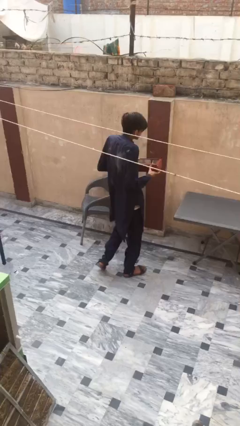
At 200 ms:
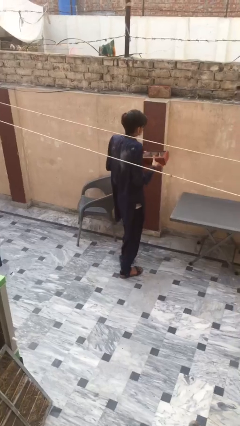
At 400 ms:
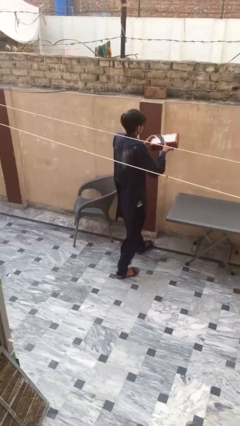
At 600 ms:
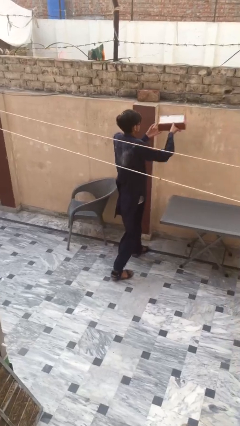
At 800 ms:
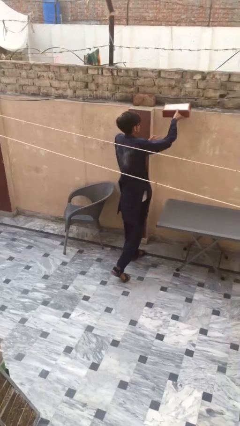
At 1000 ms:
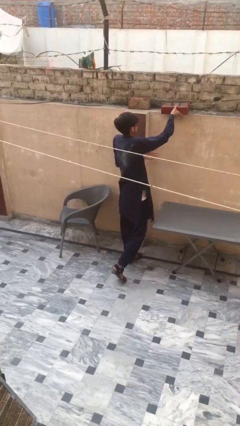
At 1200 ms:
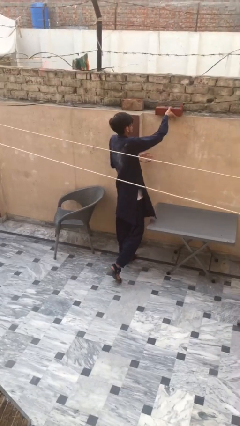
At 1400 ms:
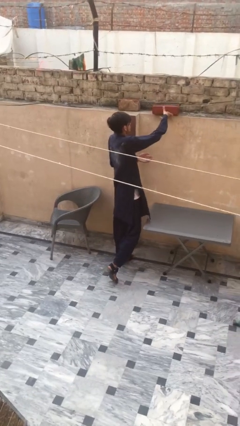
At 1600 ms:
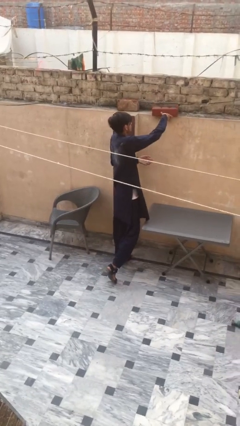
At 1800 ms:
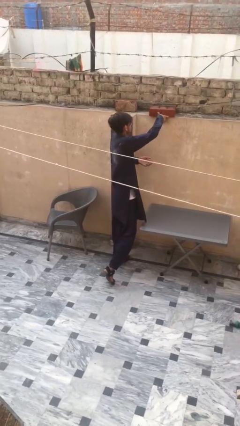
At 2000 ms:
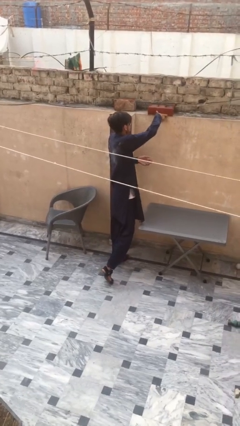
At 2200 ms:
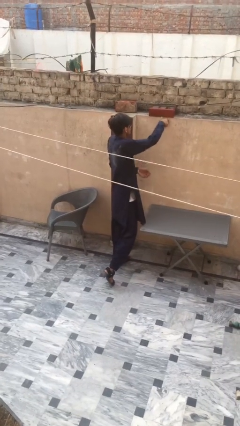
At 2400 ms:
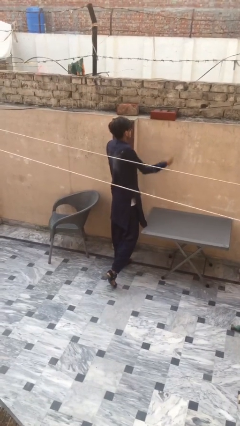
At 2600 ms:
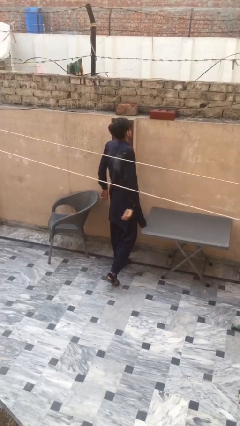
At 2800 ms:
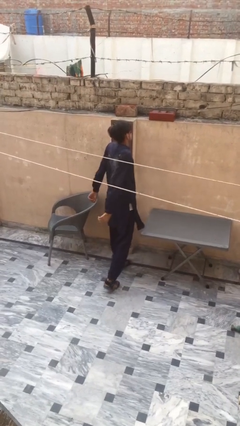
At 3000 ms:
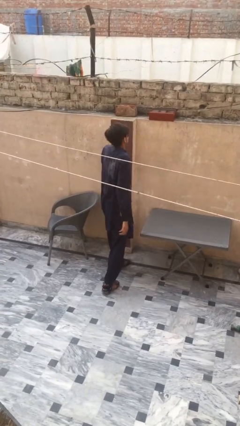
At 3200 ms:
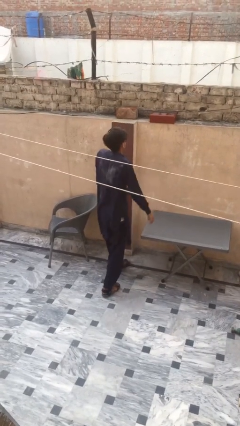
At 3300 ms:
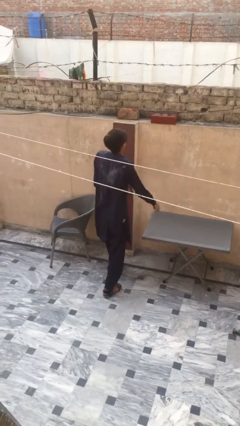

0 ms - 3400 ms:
person puts down object on shelf

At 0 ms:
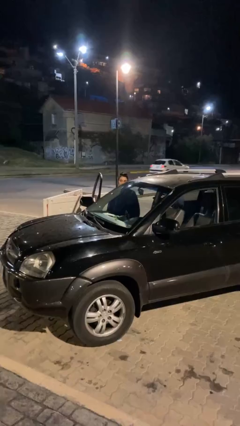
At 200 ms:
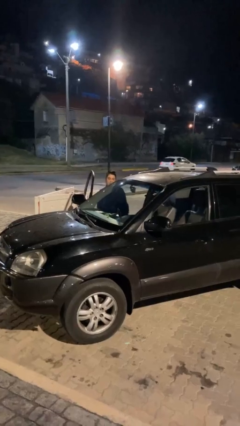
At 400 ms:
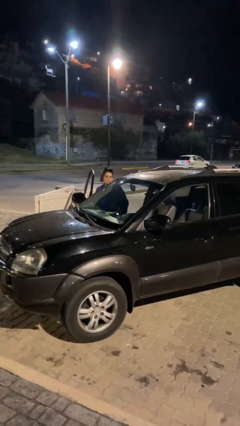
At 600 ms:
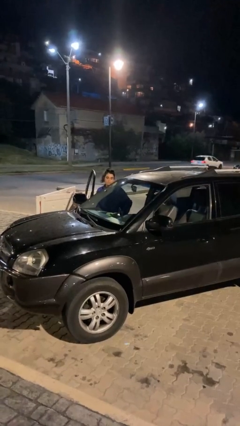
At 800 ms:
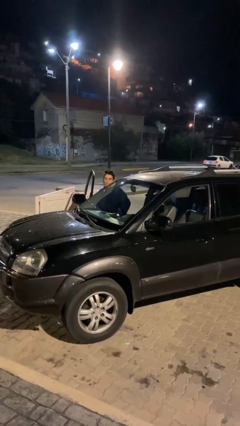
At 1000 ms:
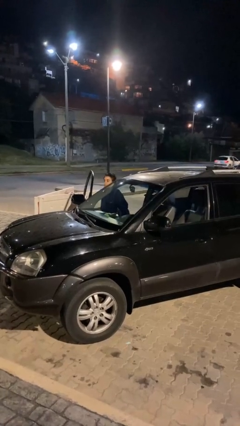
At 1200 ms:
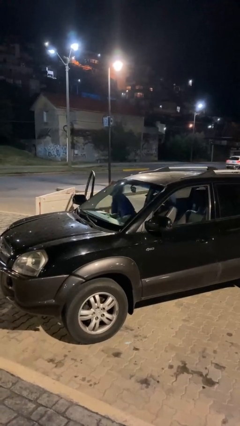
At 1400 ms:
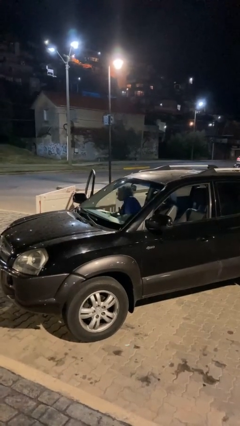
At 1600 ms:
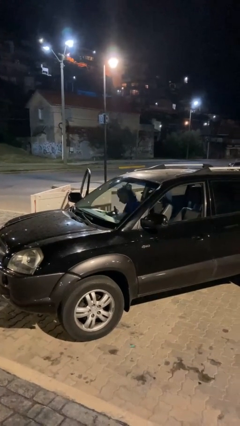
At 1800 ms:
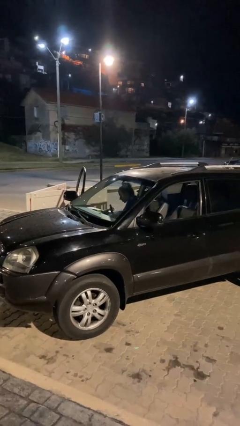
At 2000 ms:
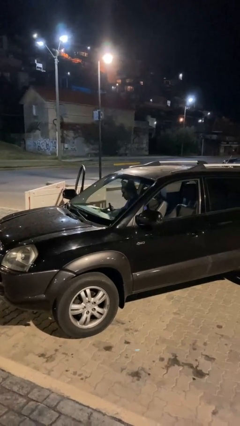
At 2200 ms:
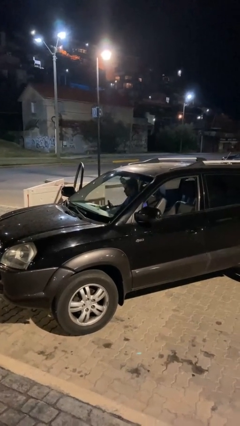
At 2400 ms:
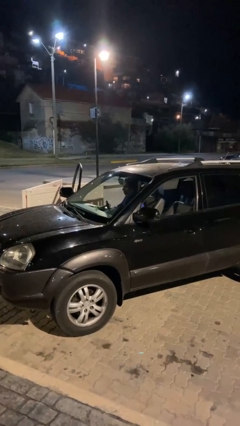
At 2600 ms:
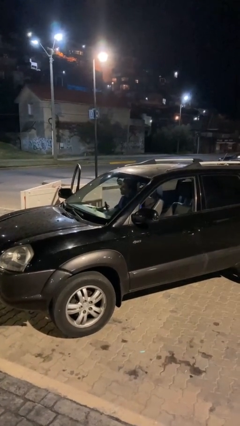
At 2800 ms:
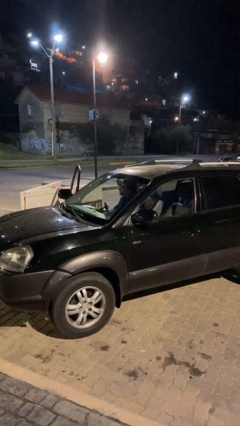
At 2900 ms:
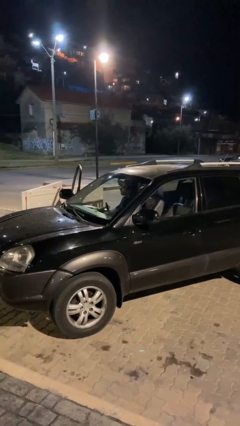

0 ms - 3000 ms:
person enters car

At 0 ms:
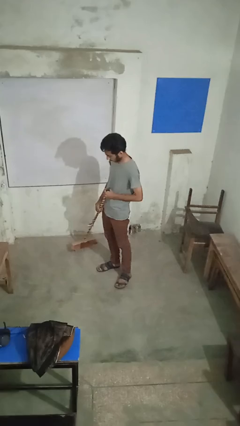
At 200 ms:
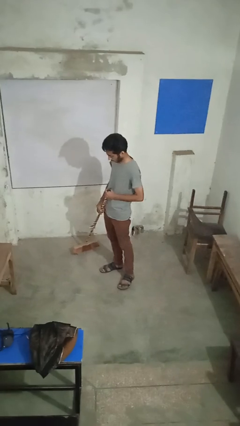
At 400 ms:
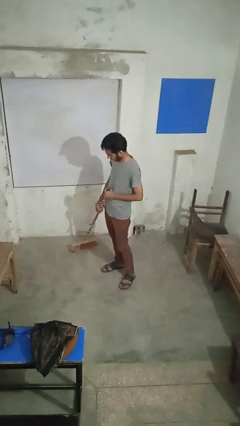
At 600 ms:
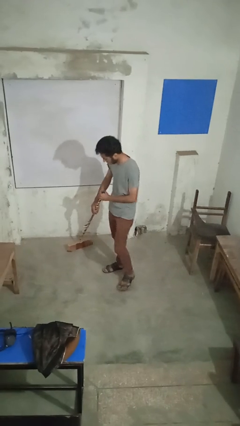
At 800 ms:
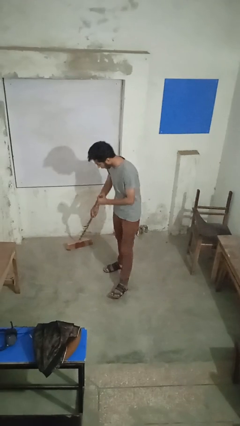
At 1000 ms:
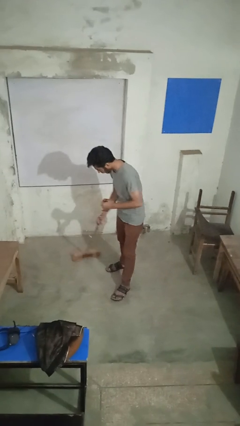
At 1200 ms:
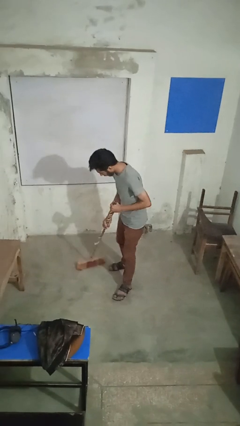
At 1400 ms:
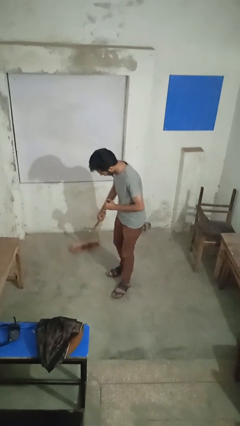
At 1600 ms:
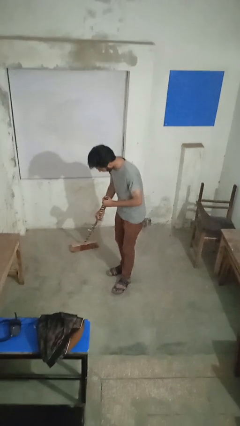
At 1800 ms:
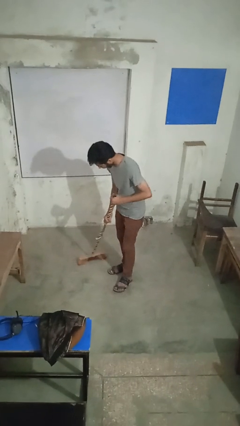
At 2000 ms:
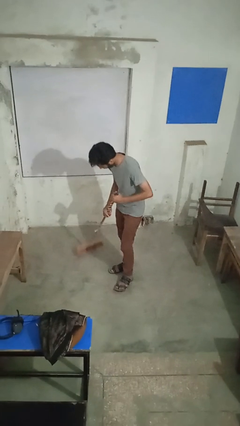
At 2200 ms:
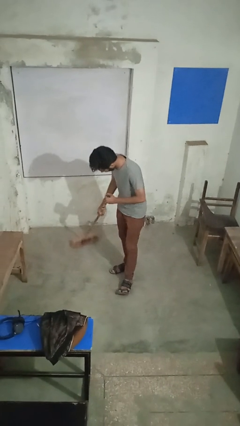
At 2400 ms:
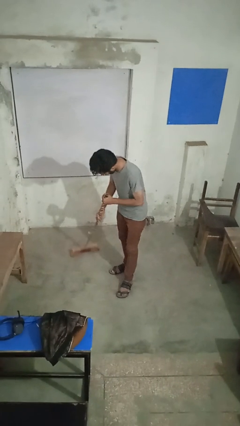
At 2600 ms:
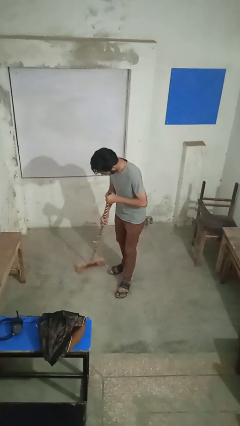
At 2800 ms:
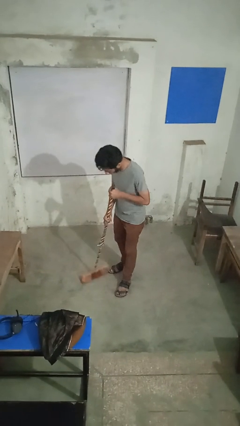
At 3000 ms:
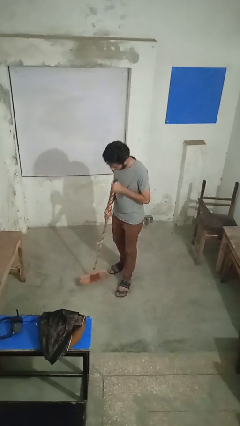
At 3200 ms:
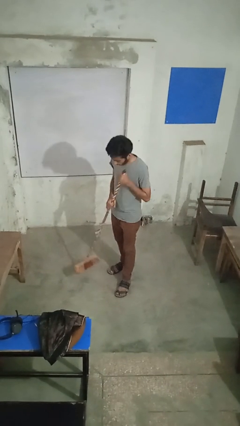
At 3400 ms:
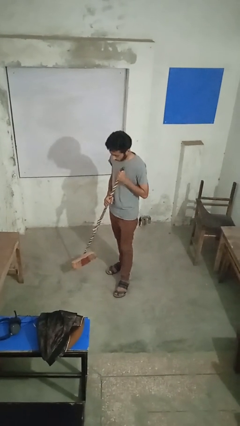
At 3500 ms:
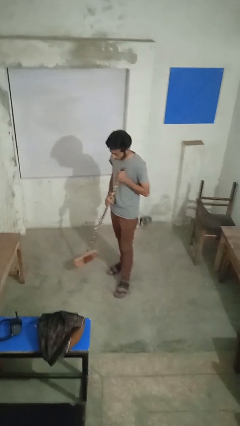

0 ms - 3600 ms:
person sweeps floor

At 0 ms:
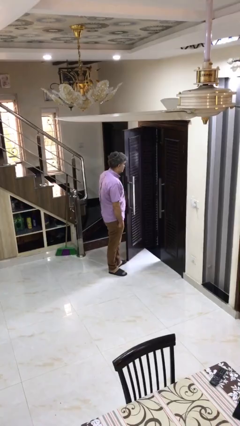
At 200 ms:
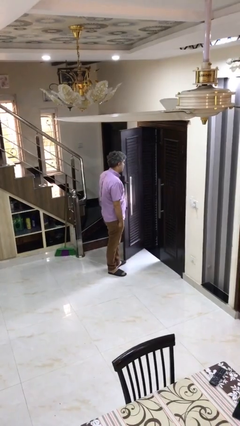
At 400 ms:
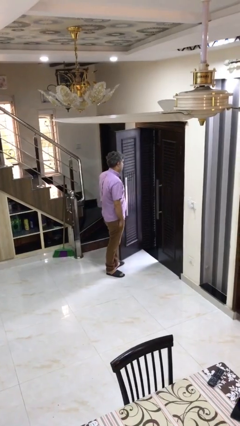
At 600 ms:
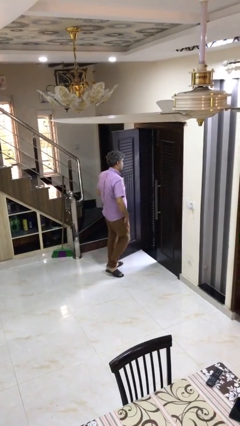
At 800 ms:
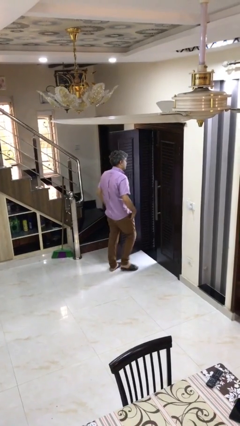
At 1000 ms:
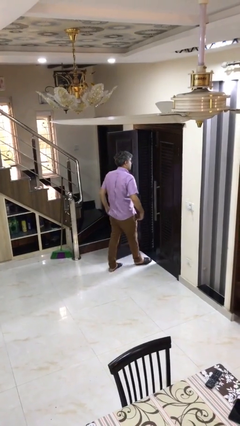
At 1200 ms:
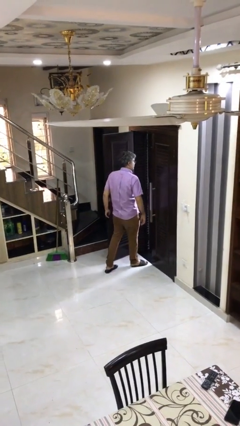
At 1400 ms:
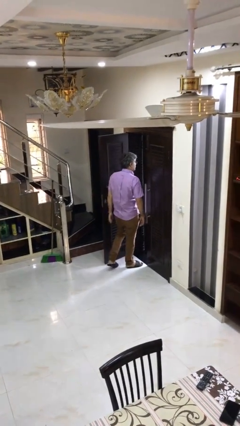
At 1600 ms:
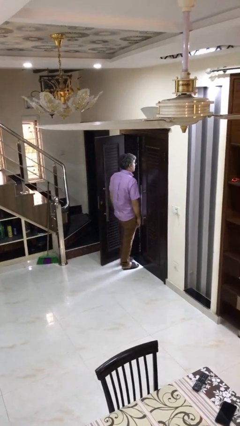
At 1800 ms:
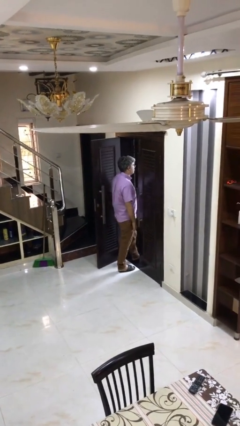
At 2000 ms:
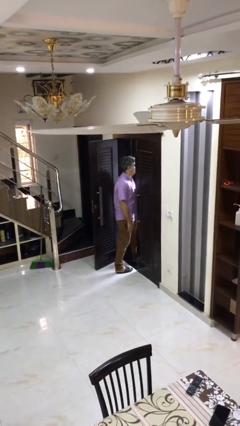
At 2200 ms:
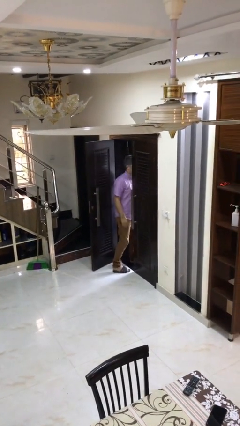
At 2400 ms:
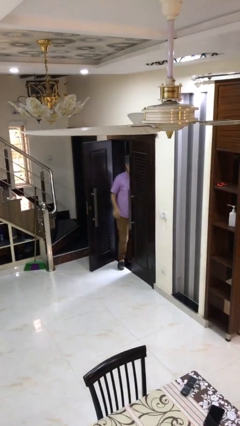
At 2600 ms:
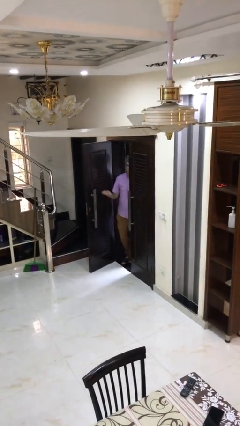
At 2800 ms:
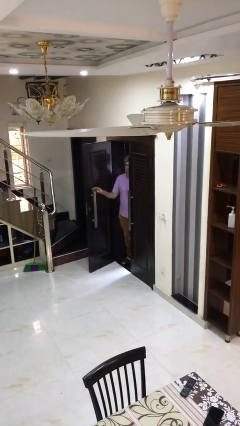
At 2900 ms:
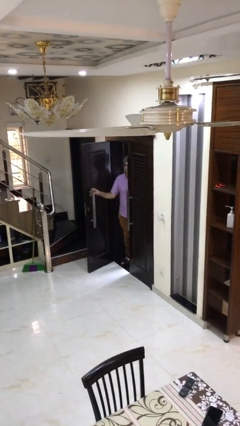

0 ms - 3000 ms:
person exits scene through structure

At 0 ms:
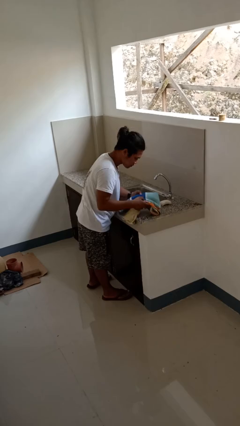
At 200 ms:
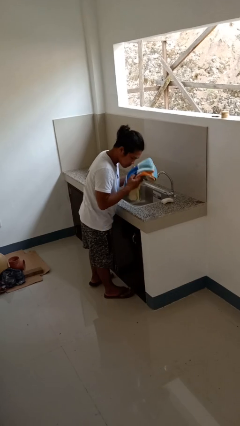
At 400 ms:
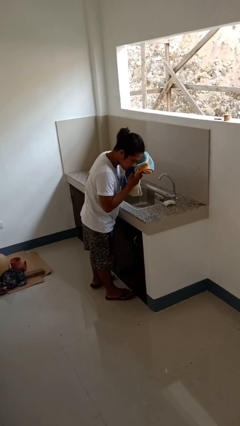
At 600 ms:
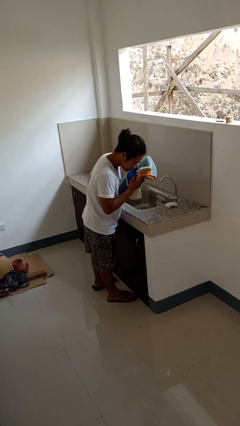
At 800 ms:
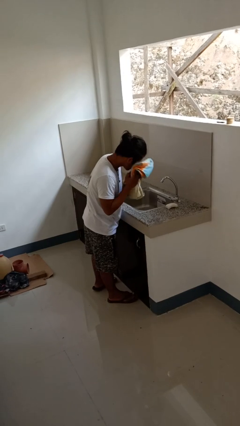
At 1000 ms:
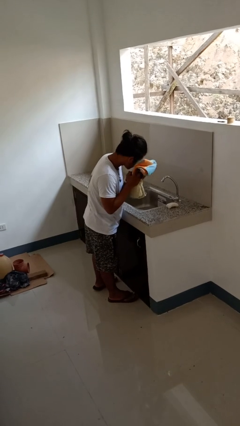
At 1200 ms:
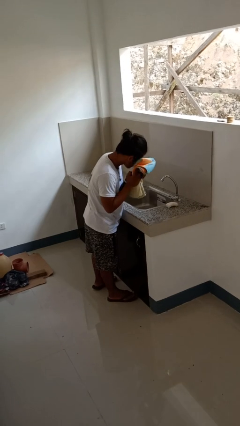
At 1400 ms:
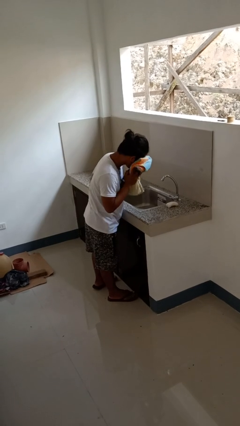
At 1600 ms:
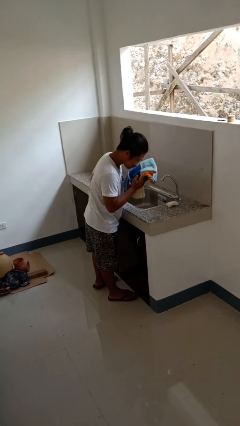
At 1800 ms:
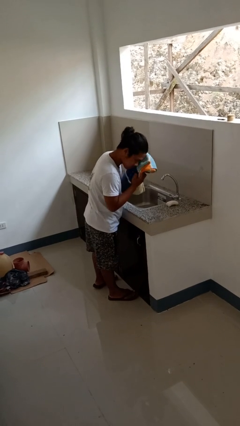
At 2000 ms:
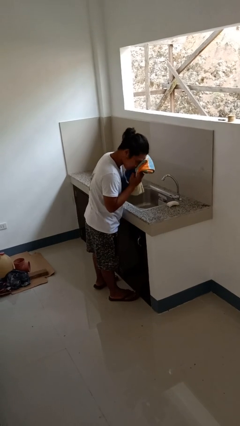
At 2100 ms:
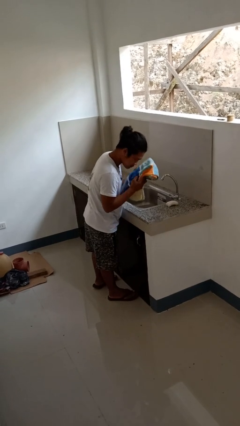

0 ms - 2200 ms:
person dries face with towel

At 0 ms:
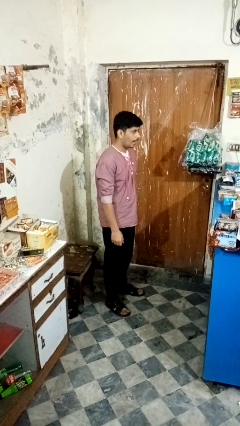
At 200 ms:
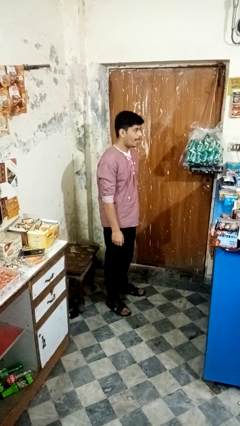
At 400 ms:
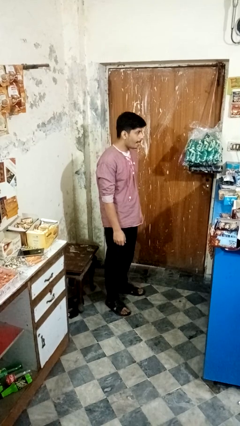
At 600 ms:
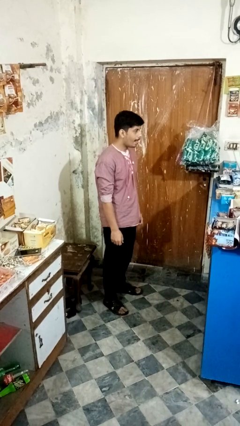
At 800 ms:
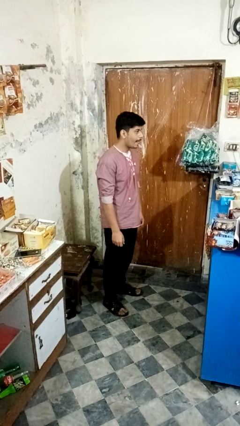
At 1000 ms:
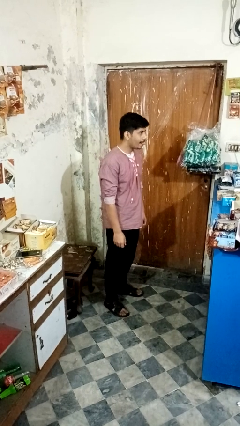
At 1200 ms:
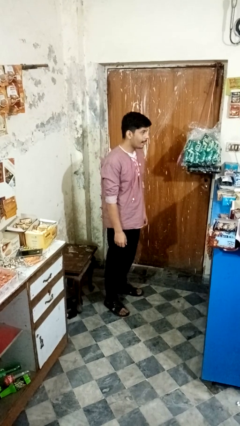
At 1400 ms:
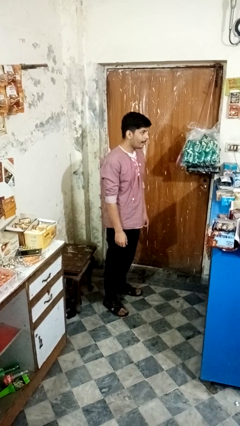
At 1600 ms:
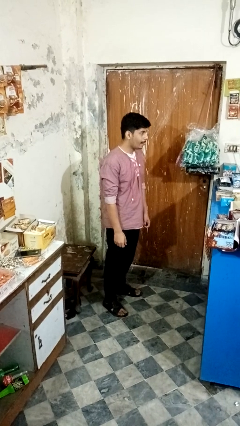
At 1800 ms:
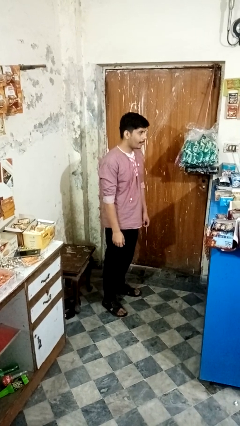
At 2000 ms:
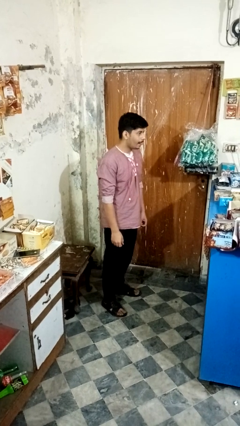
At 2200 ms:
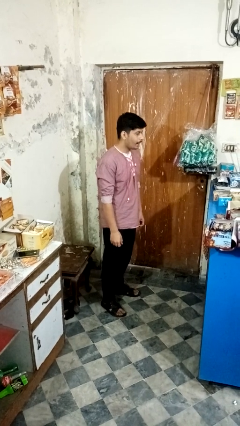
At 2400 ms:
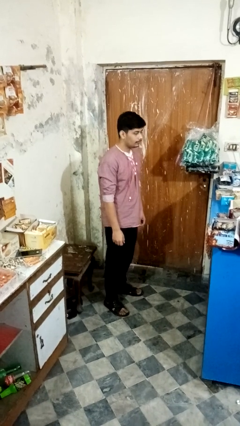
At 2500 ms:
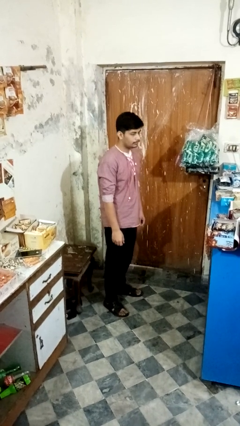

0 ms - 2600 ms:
person sticks out tongue
